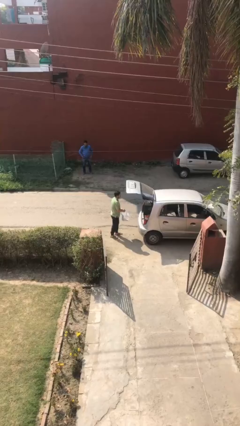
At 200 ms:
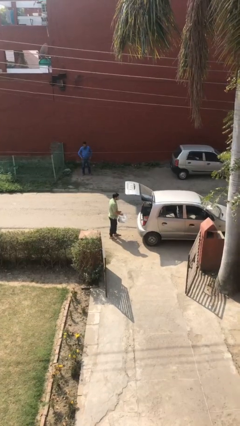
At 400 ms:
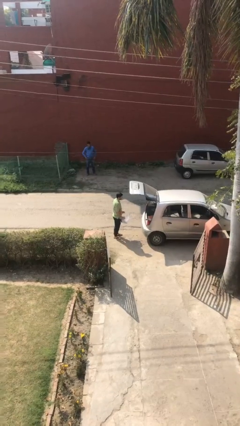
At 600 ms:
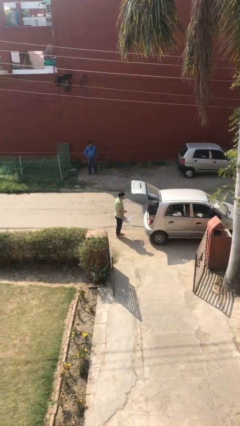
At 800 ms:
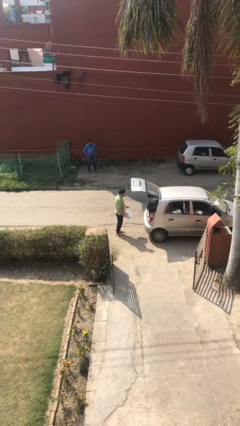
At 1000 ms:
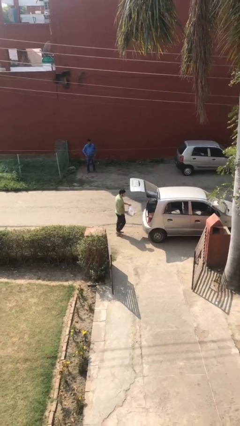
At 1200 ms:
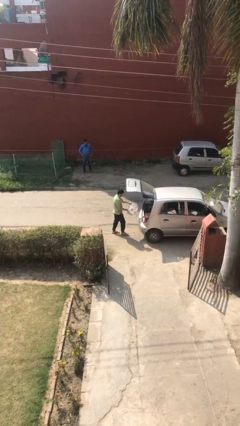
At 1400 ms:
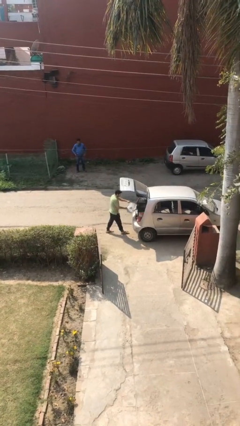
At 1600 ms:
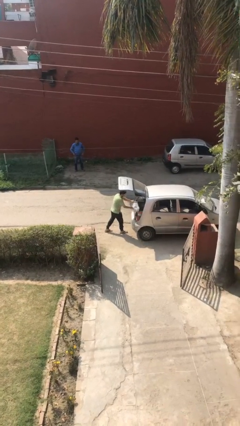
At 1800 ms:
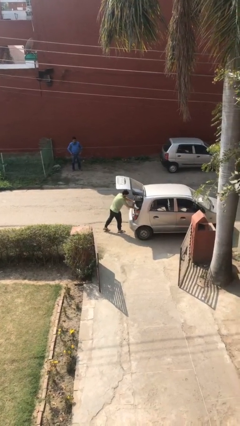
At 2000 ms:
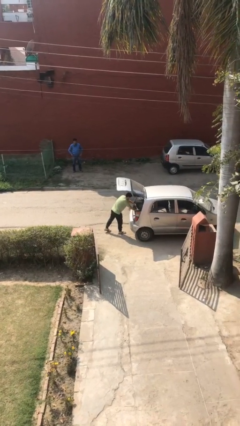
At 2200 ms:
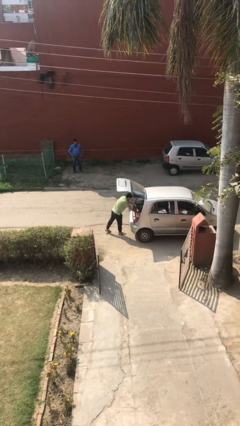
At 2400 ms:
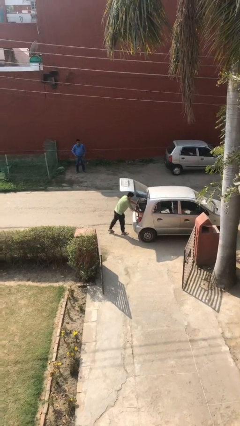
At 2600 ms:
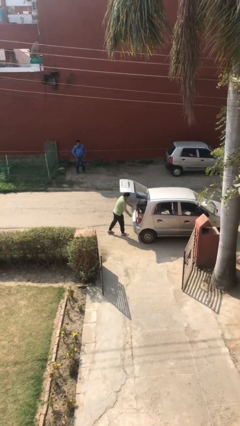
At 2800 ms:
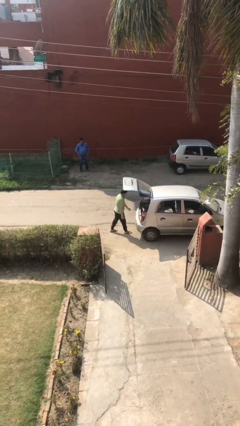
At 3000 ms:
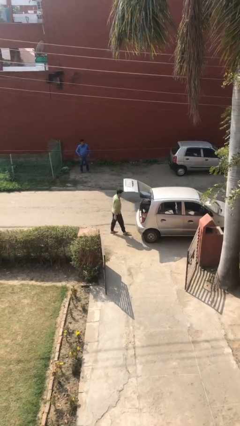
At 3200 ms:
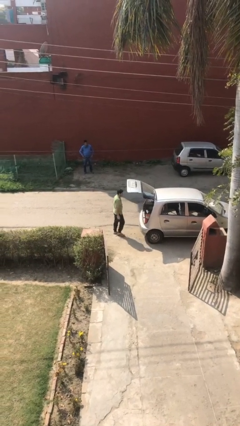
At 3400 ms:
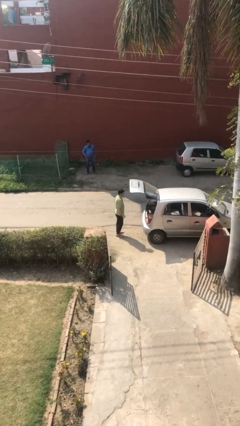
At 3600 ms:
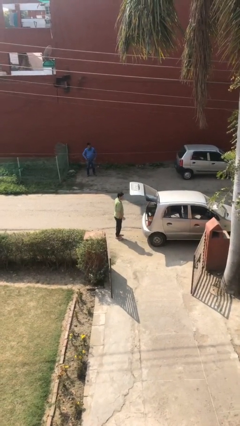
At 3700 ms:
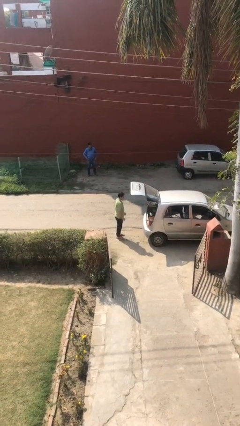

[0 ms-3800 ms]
person loads car

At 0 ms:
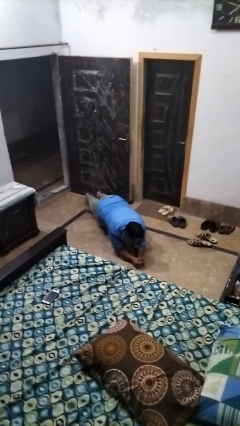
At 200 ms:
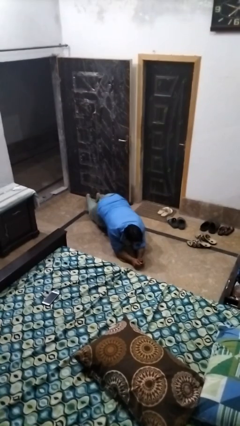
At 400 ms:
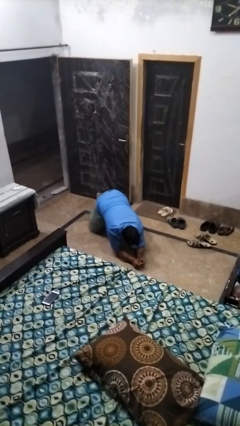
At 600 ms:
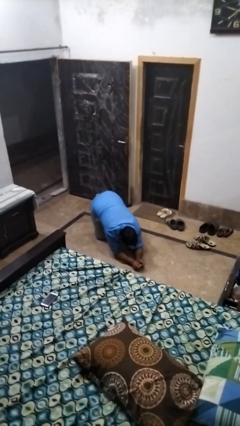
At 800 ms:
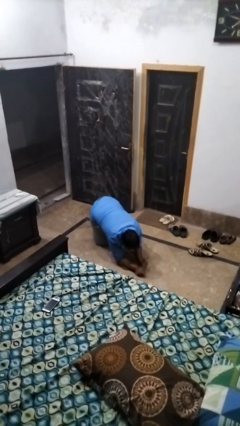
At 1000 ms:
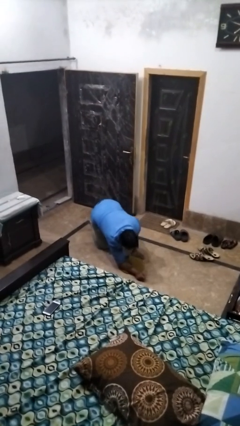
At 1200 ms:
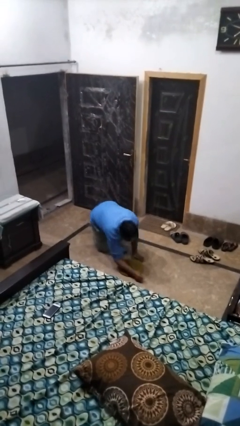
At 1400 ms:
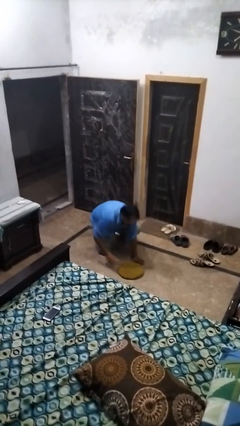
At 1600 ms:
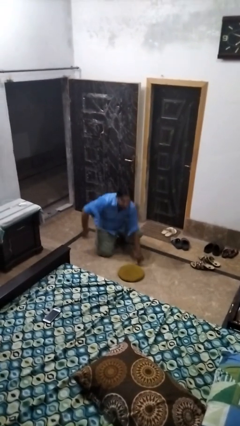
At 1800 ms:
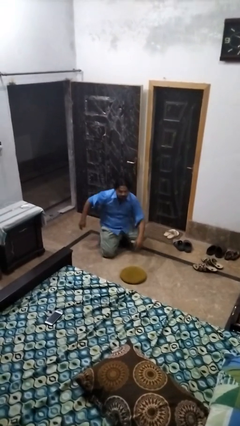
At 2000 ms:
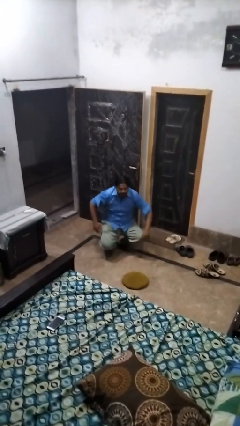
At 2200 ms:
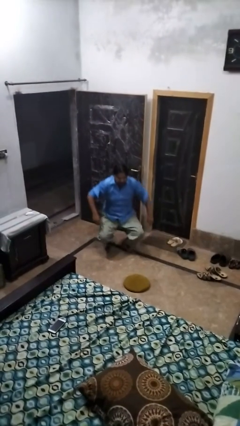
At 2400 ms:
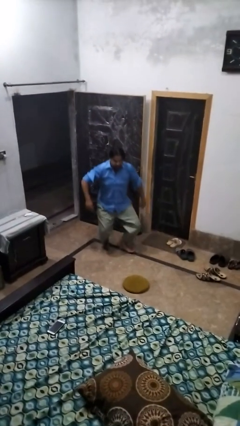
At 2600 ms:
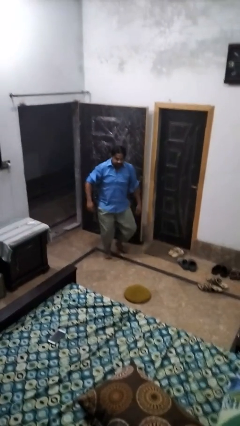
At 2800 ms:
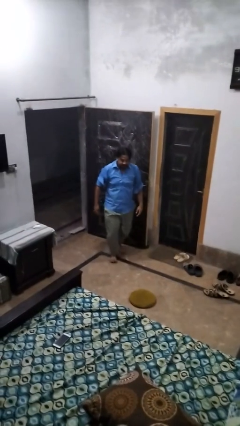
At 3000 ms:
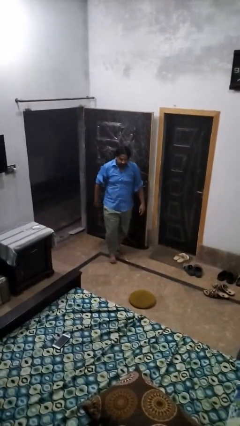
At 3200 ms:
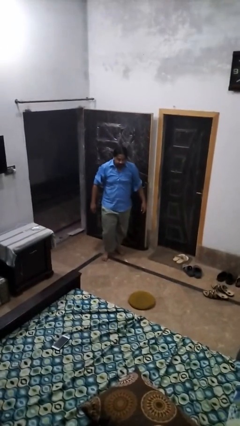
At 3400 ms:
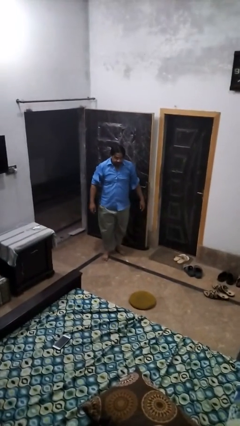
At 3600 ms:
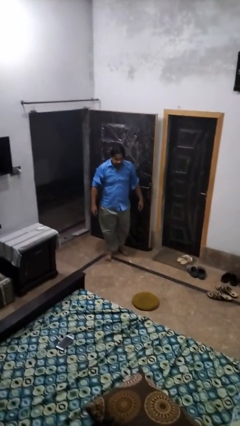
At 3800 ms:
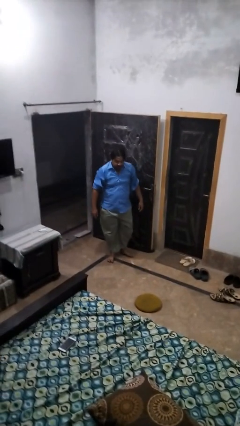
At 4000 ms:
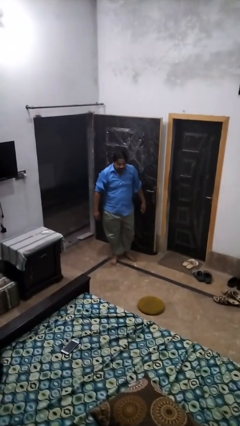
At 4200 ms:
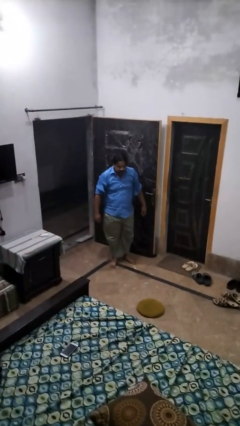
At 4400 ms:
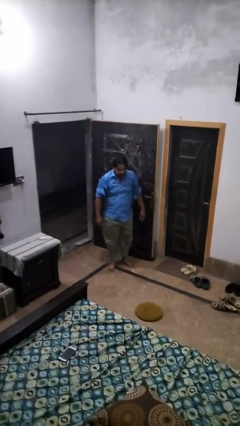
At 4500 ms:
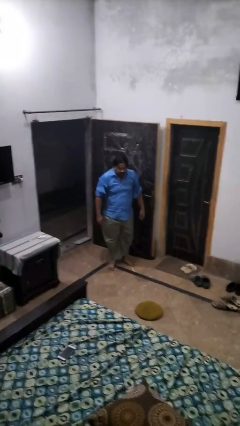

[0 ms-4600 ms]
person stands up from floor

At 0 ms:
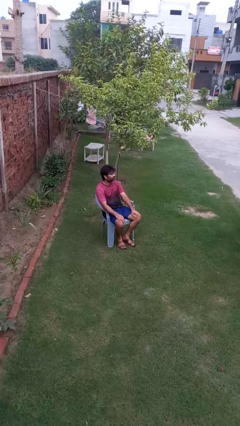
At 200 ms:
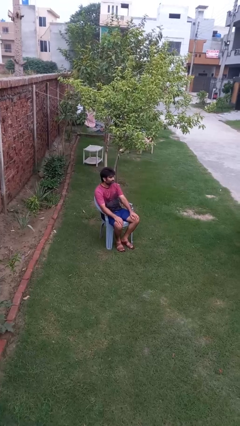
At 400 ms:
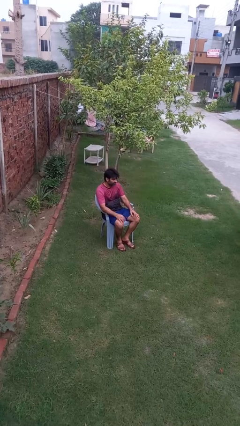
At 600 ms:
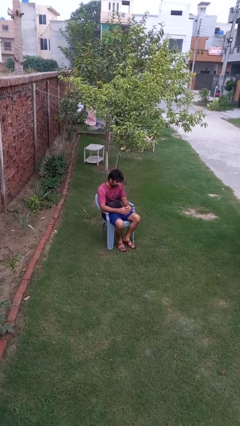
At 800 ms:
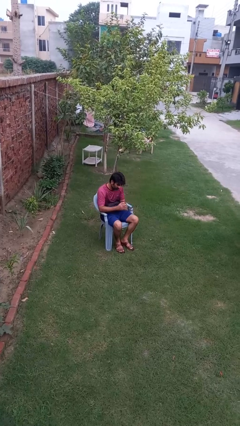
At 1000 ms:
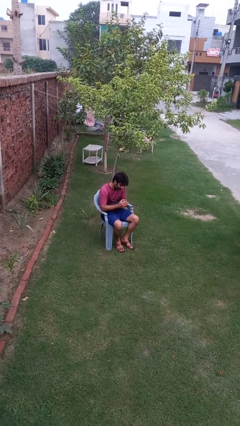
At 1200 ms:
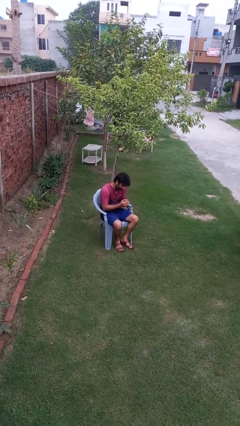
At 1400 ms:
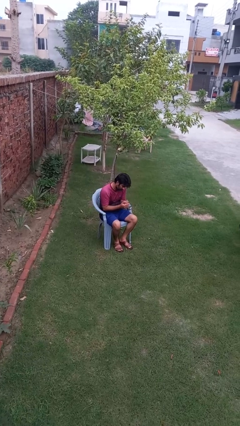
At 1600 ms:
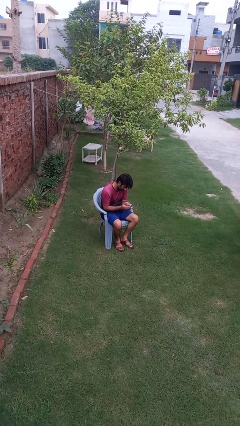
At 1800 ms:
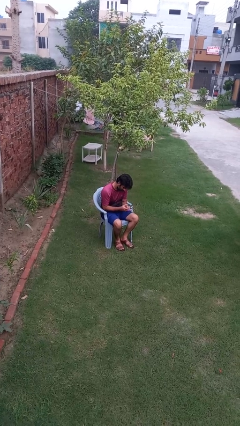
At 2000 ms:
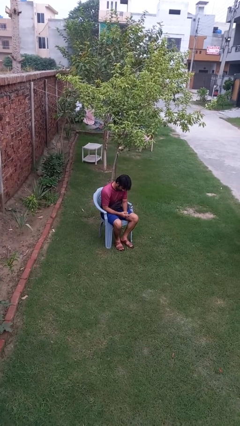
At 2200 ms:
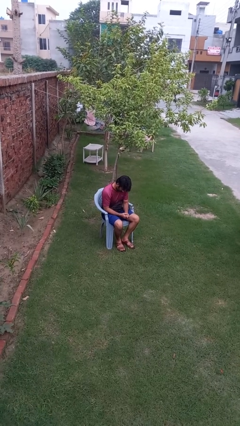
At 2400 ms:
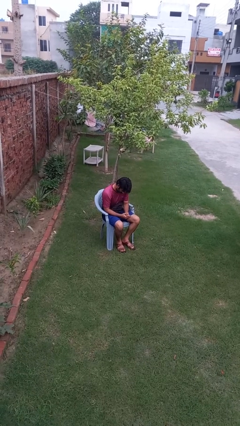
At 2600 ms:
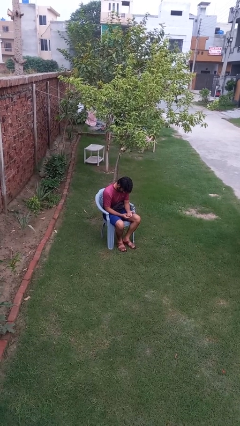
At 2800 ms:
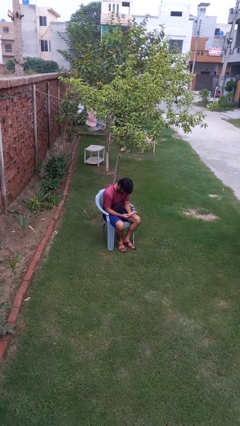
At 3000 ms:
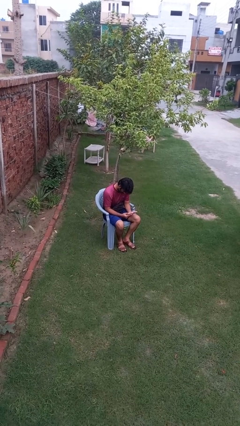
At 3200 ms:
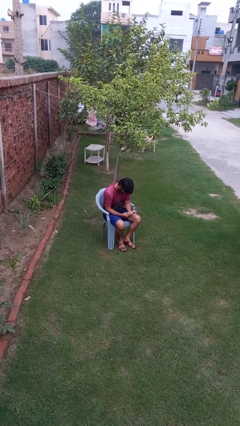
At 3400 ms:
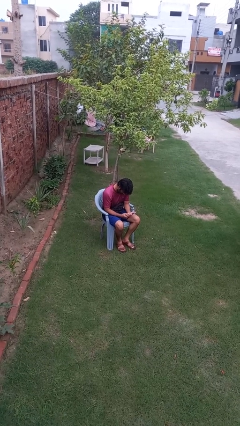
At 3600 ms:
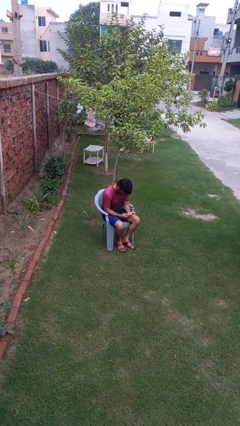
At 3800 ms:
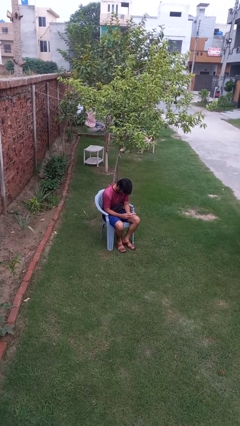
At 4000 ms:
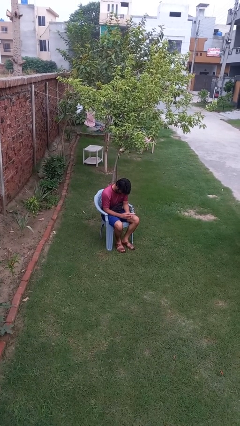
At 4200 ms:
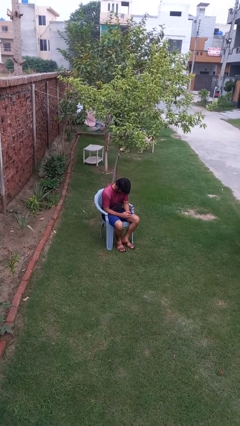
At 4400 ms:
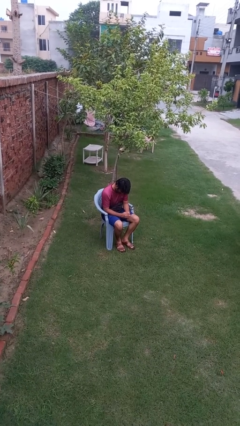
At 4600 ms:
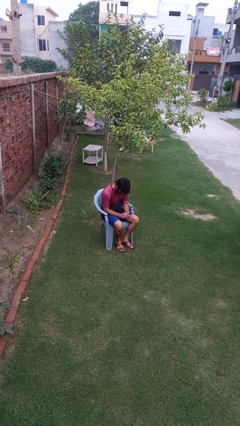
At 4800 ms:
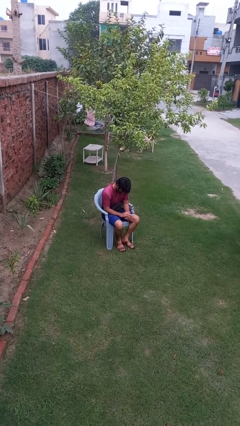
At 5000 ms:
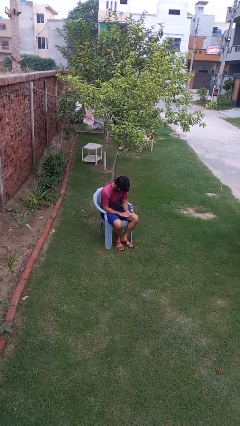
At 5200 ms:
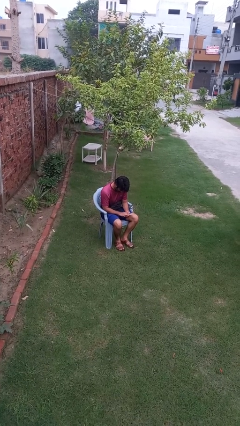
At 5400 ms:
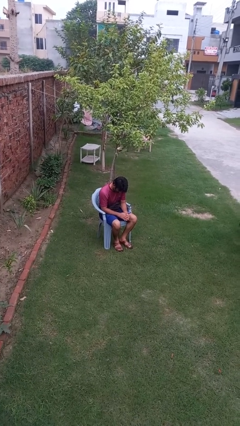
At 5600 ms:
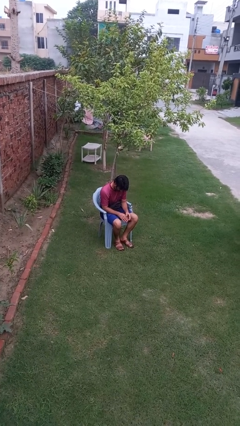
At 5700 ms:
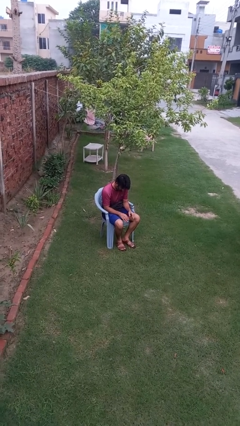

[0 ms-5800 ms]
person looks at hands in lap

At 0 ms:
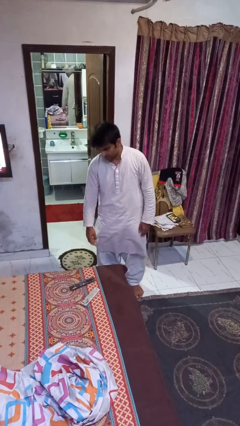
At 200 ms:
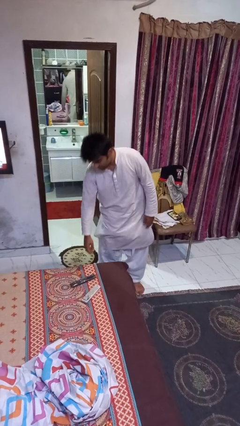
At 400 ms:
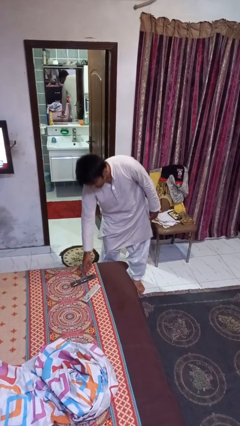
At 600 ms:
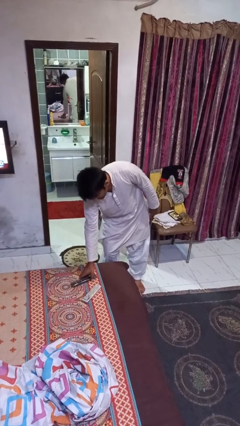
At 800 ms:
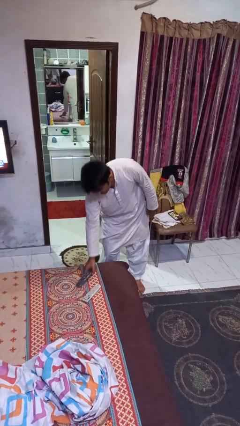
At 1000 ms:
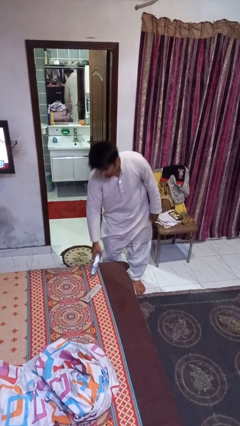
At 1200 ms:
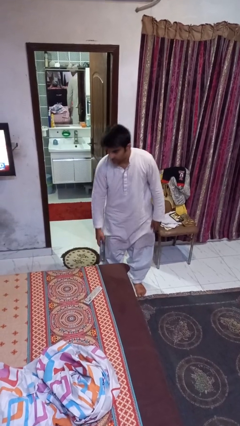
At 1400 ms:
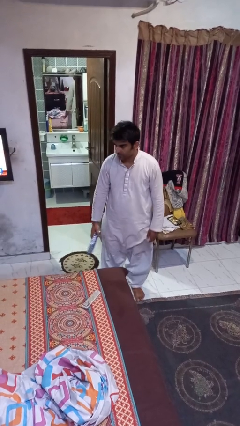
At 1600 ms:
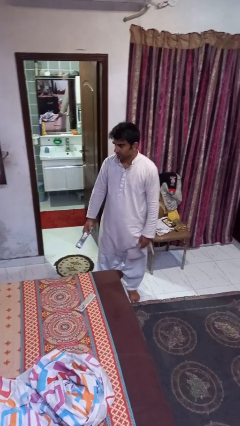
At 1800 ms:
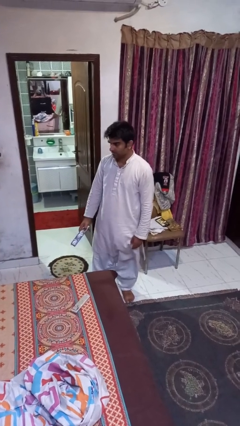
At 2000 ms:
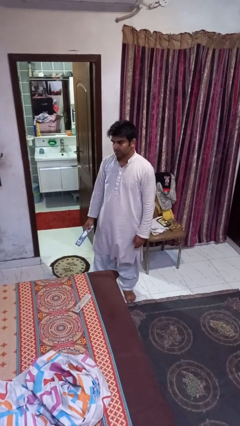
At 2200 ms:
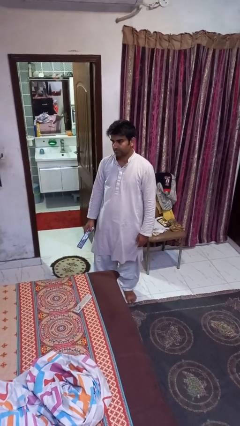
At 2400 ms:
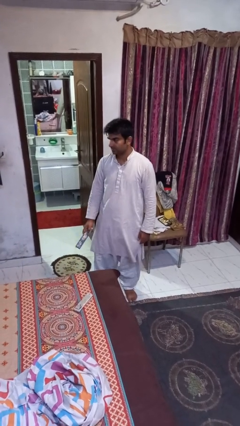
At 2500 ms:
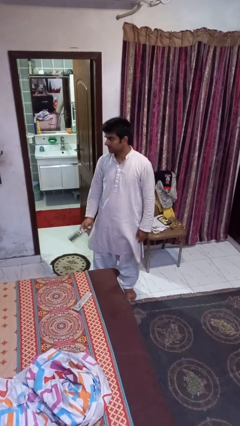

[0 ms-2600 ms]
person picks up object from bed

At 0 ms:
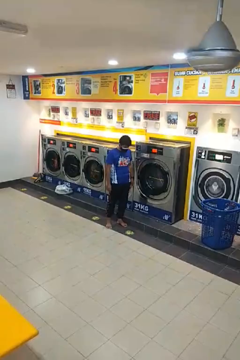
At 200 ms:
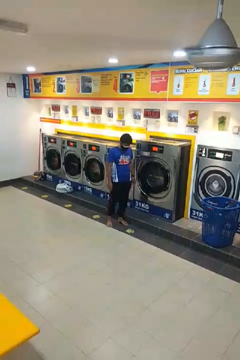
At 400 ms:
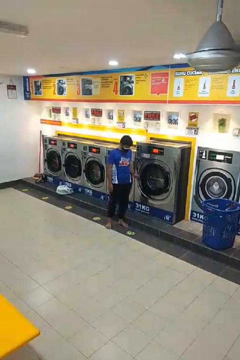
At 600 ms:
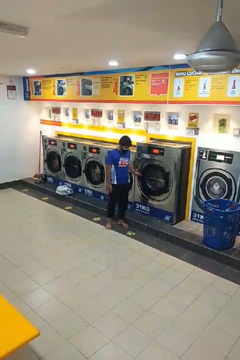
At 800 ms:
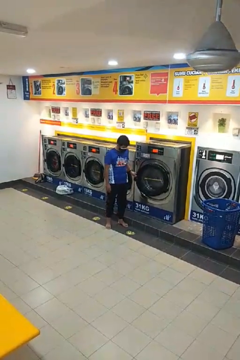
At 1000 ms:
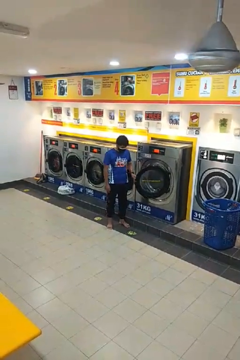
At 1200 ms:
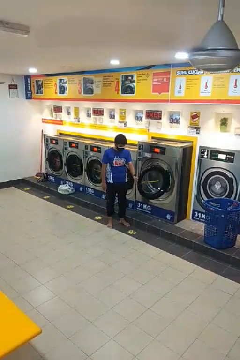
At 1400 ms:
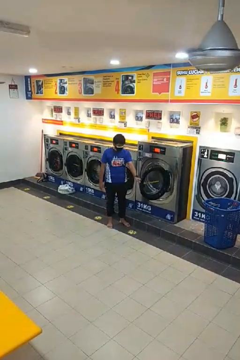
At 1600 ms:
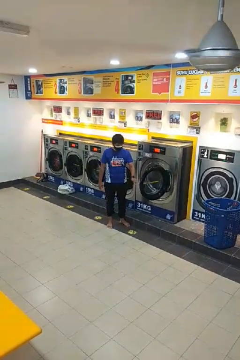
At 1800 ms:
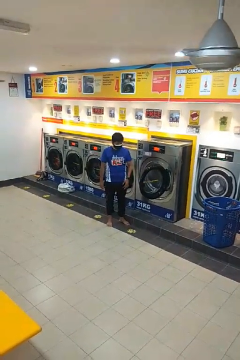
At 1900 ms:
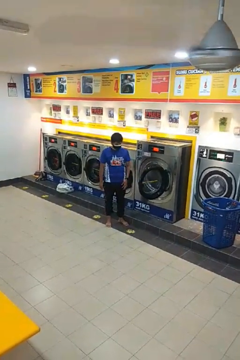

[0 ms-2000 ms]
person opens clothes washer
